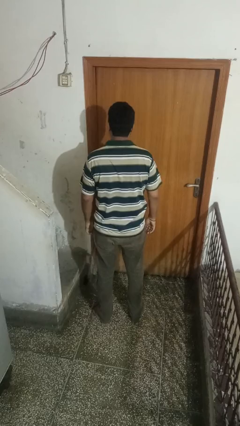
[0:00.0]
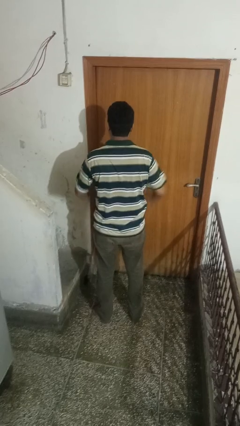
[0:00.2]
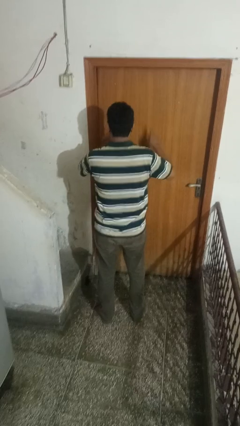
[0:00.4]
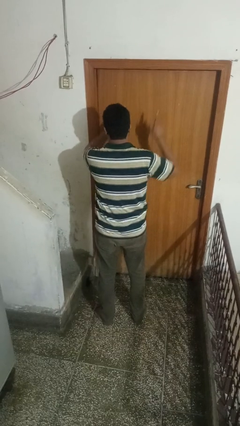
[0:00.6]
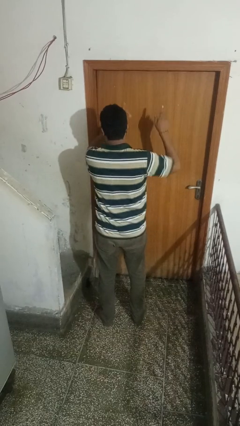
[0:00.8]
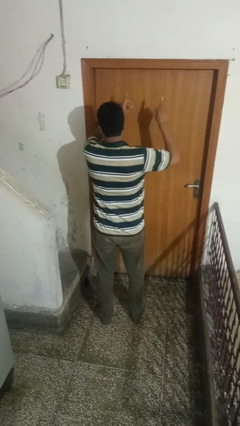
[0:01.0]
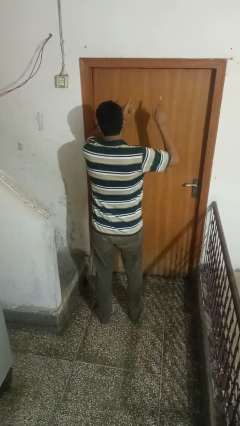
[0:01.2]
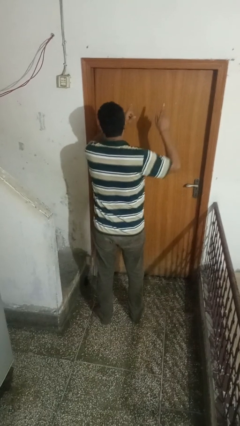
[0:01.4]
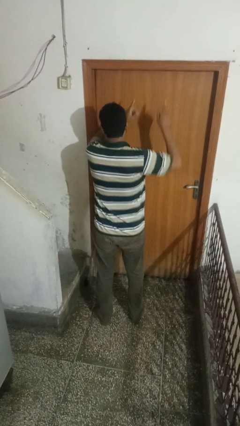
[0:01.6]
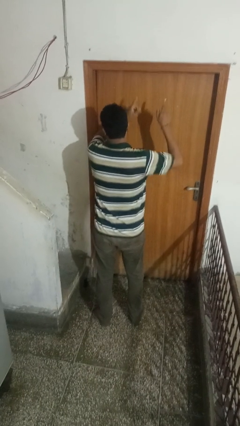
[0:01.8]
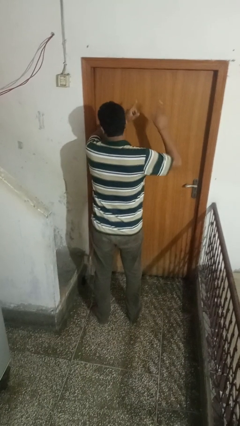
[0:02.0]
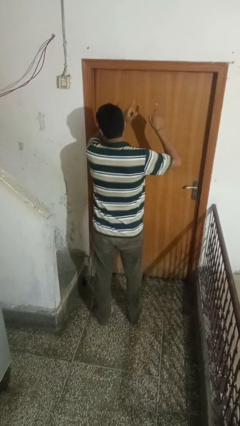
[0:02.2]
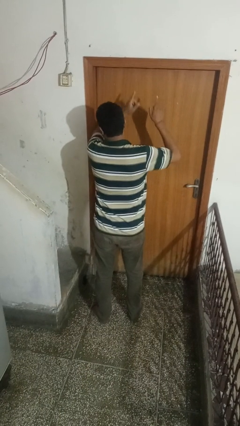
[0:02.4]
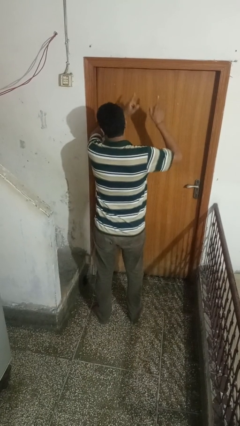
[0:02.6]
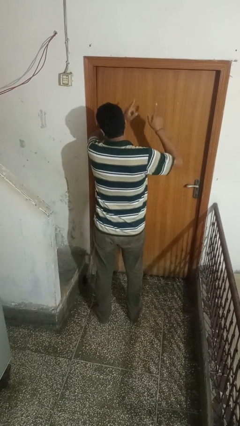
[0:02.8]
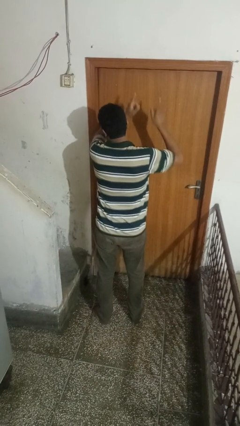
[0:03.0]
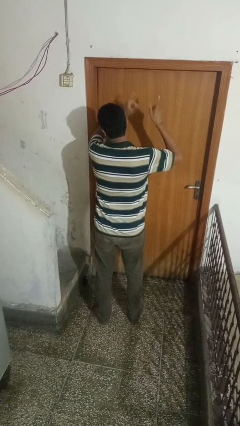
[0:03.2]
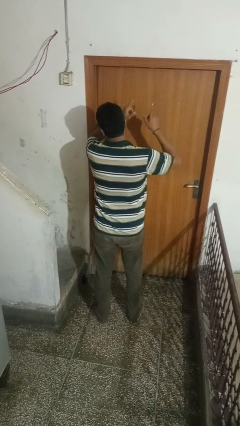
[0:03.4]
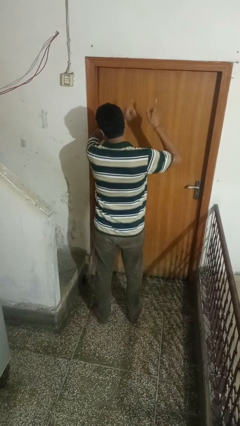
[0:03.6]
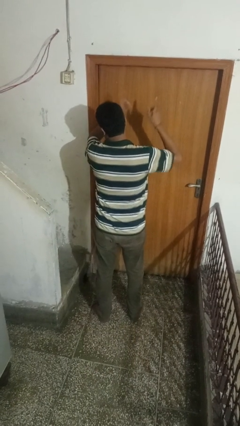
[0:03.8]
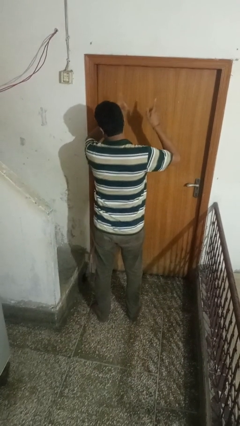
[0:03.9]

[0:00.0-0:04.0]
person dances in place

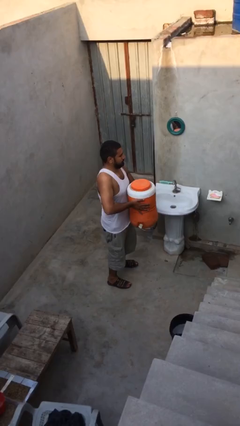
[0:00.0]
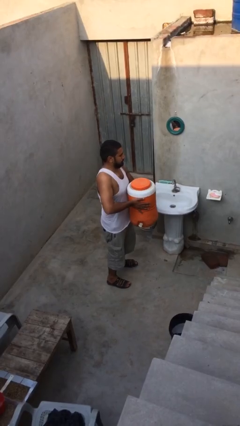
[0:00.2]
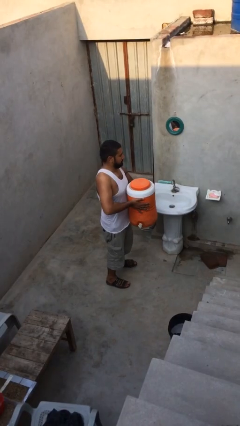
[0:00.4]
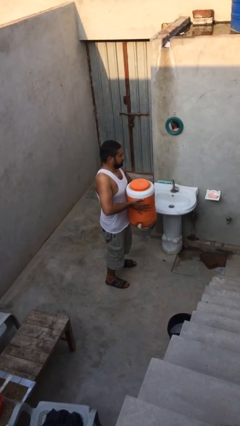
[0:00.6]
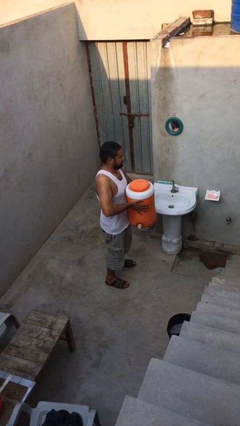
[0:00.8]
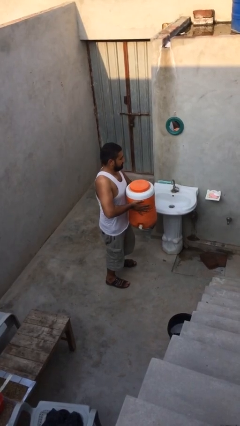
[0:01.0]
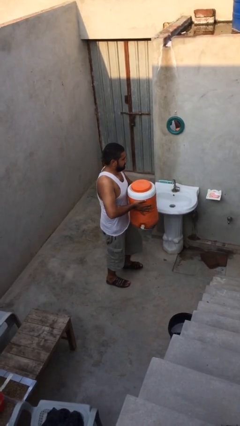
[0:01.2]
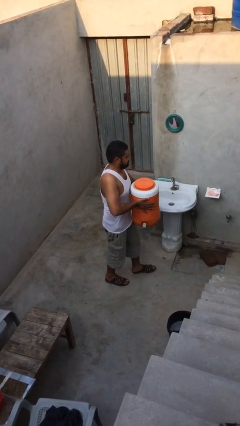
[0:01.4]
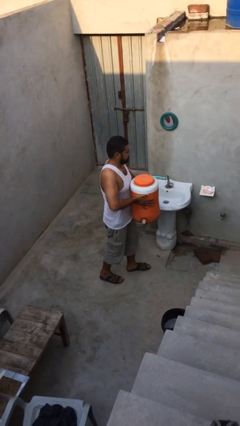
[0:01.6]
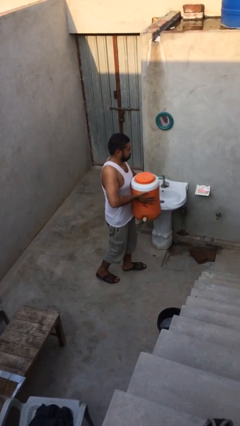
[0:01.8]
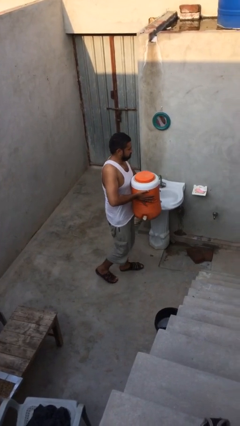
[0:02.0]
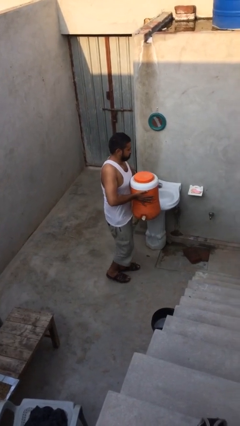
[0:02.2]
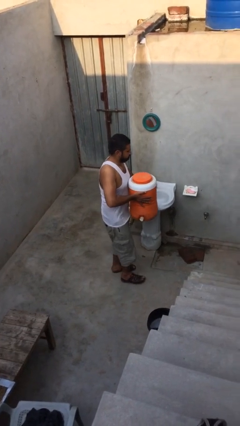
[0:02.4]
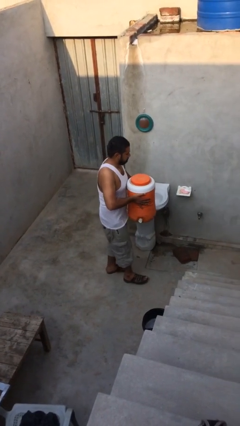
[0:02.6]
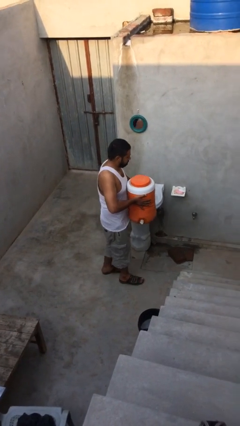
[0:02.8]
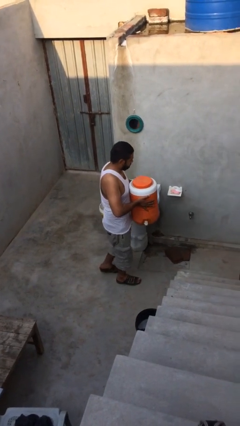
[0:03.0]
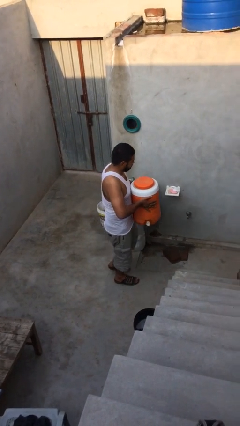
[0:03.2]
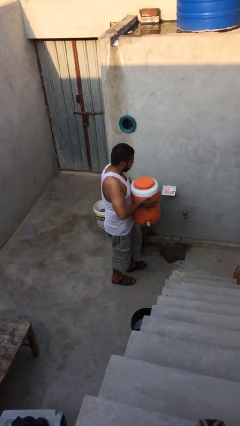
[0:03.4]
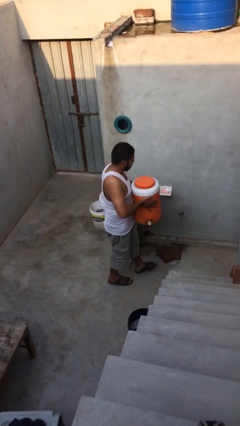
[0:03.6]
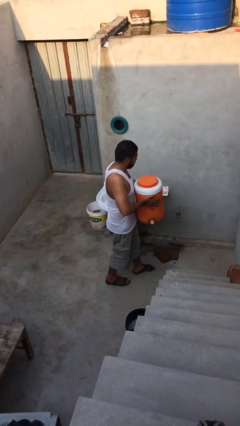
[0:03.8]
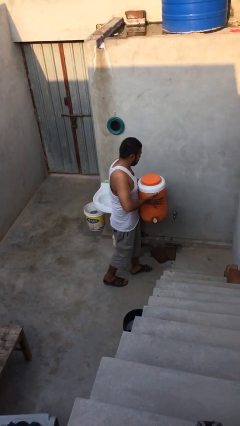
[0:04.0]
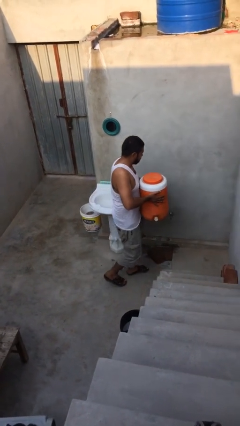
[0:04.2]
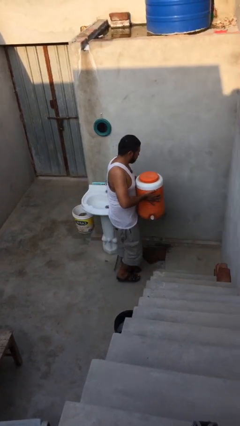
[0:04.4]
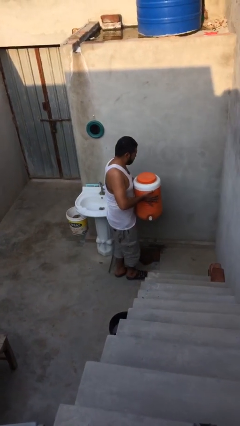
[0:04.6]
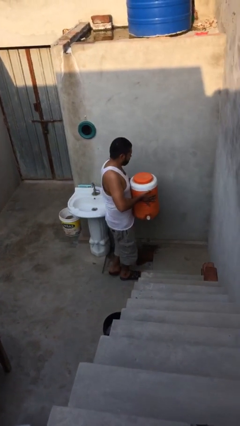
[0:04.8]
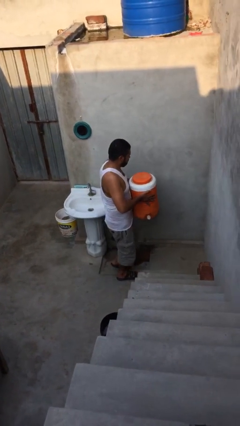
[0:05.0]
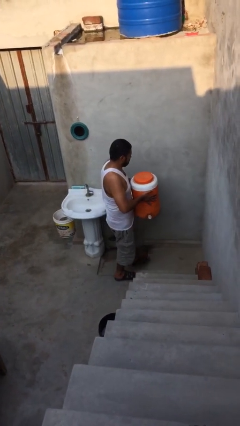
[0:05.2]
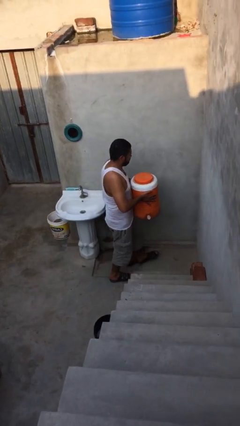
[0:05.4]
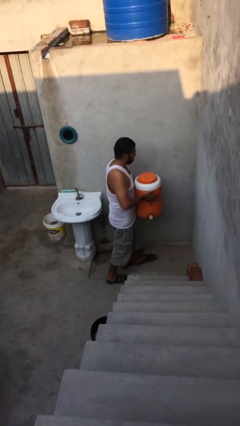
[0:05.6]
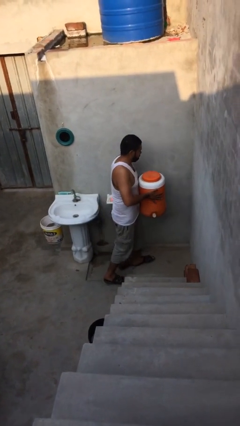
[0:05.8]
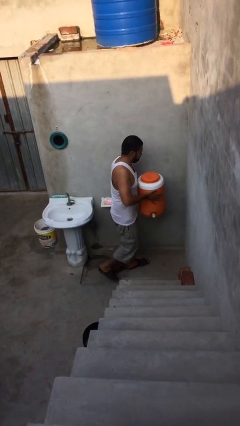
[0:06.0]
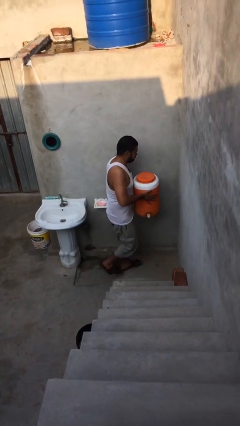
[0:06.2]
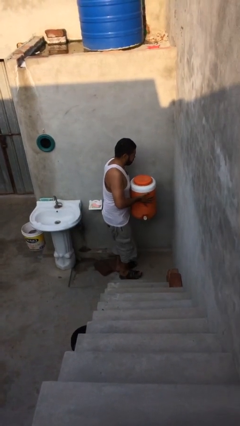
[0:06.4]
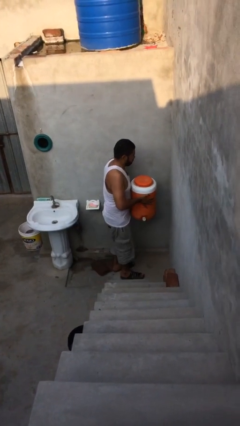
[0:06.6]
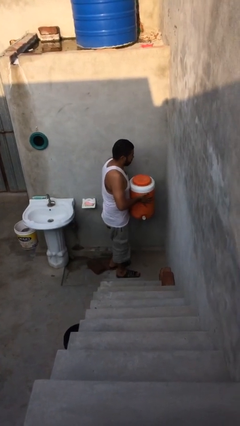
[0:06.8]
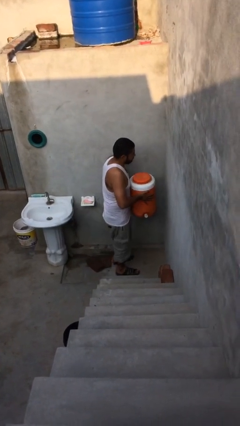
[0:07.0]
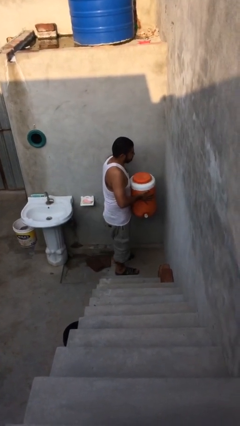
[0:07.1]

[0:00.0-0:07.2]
person carries heavy object

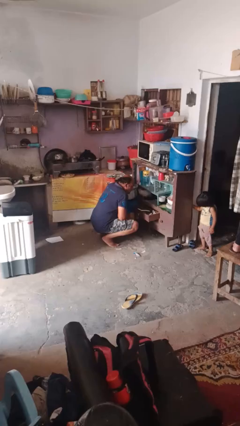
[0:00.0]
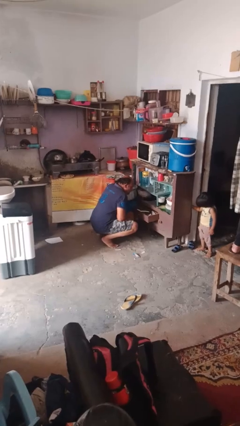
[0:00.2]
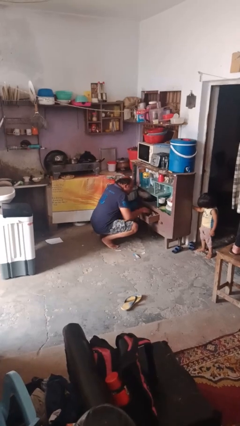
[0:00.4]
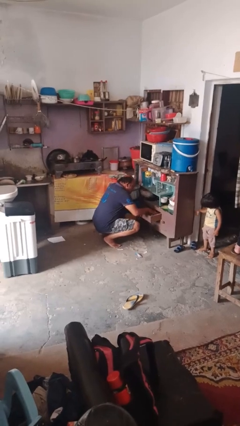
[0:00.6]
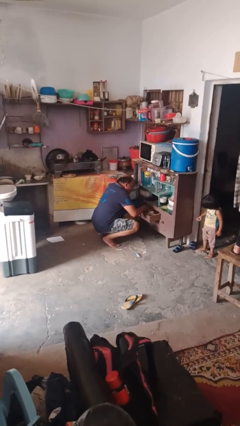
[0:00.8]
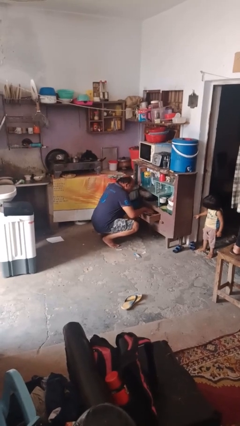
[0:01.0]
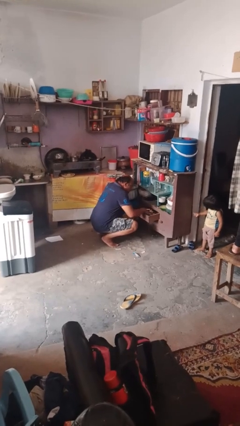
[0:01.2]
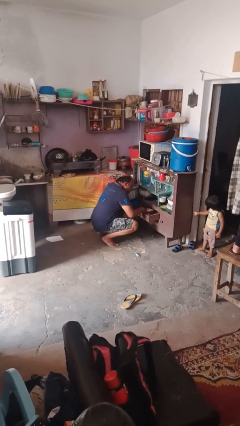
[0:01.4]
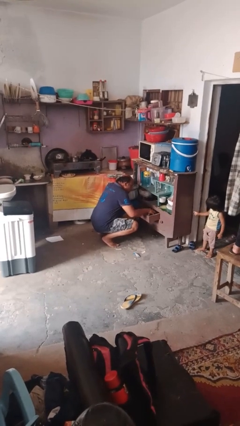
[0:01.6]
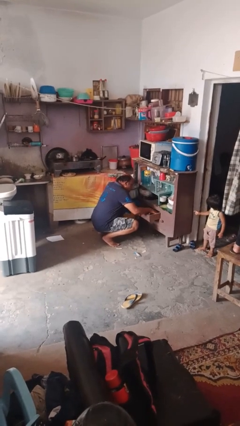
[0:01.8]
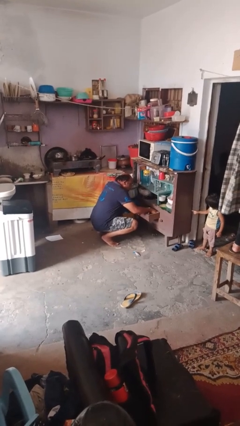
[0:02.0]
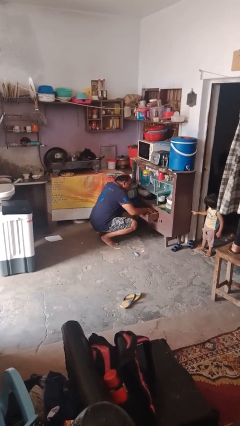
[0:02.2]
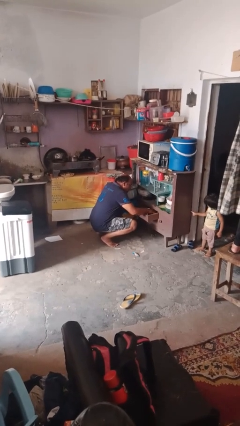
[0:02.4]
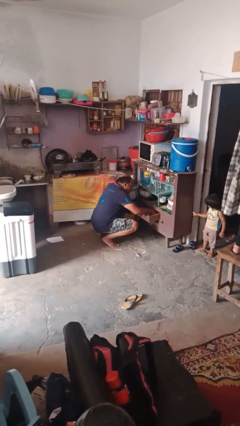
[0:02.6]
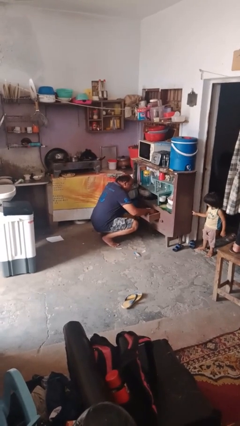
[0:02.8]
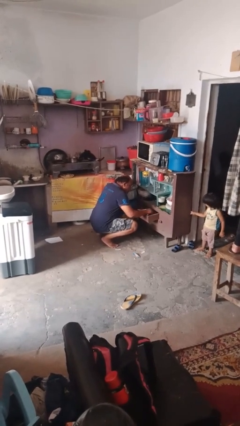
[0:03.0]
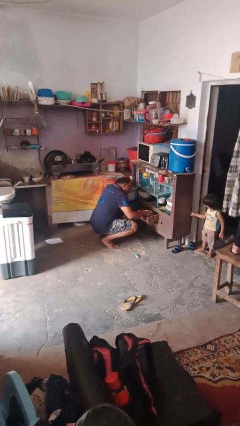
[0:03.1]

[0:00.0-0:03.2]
person searches in kitchen drawer

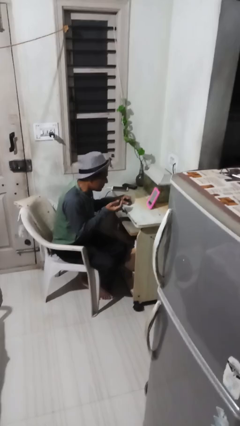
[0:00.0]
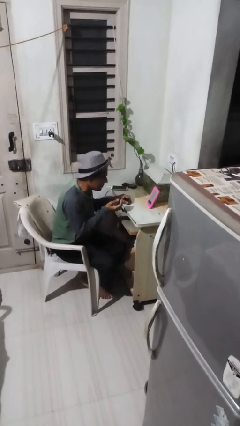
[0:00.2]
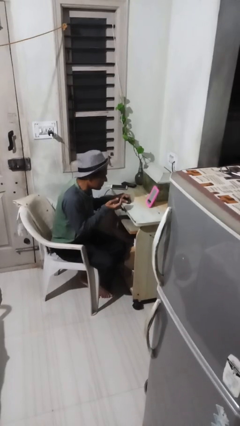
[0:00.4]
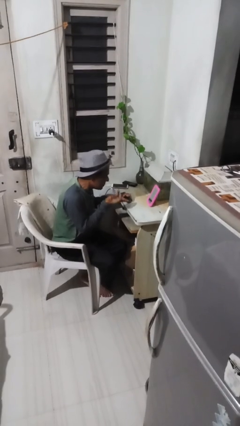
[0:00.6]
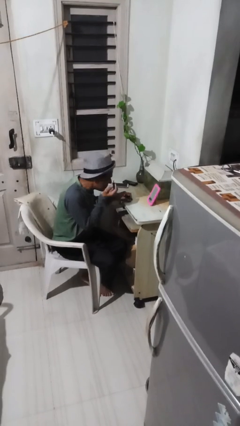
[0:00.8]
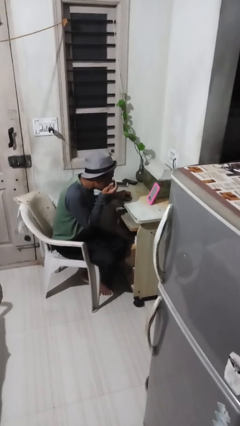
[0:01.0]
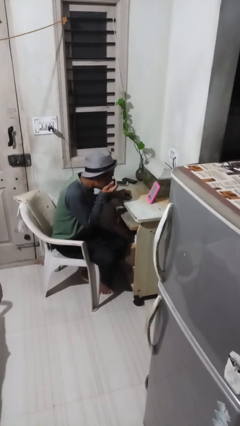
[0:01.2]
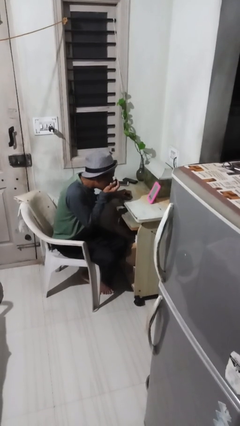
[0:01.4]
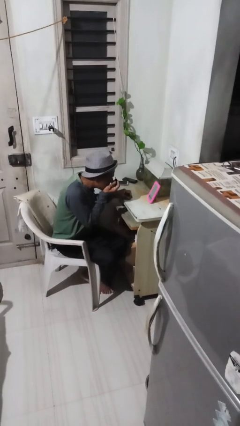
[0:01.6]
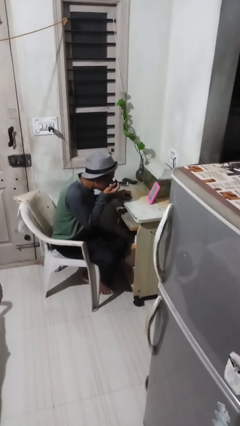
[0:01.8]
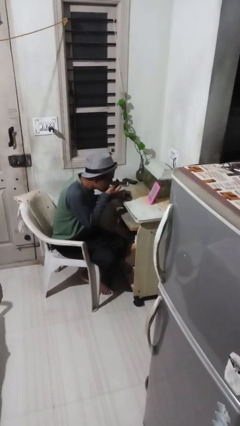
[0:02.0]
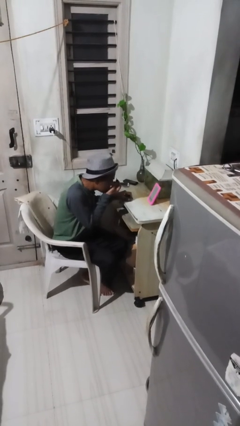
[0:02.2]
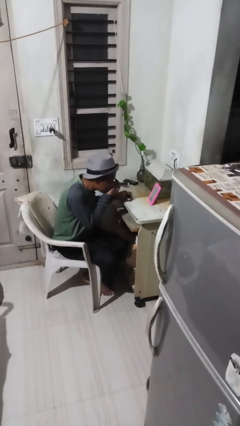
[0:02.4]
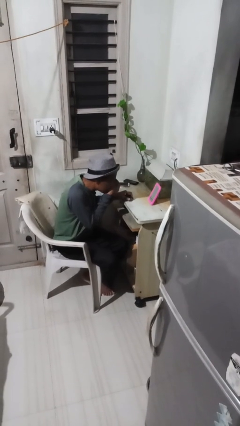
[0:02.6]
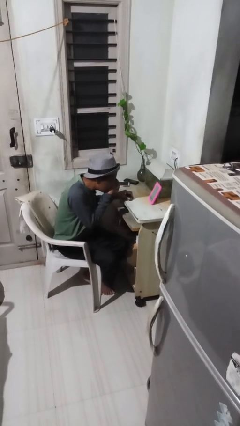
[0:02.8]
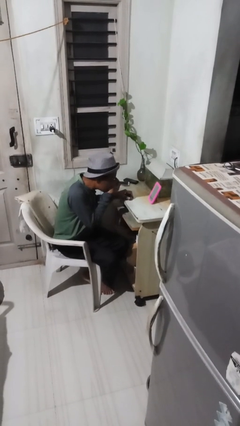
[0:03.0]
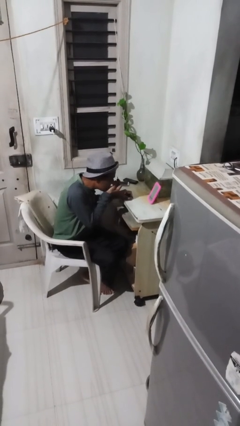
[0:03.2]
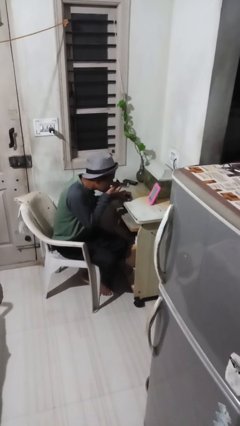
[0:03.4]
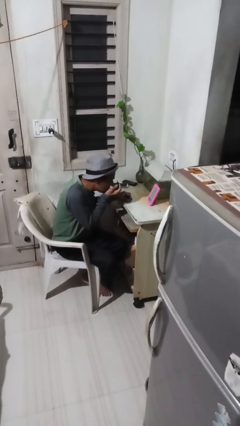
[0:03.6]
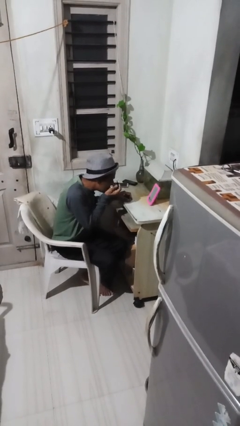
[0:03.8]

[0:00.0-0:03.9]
person applies eye makeup
